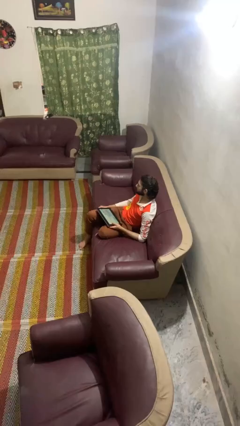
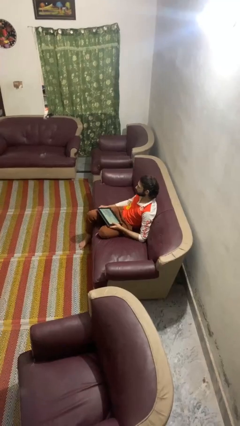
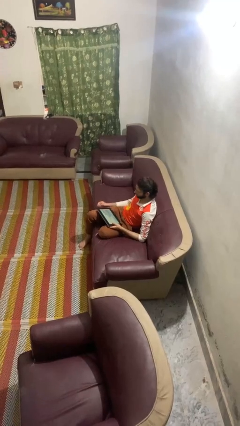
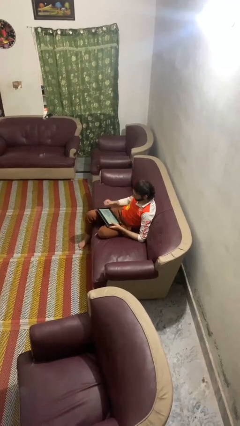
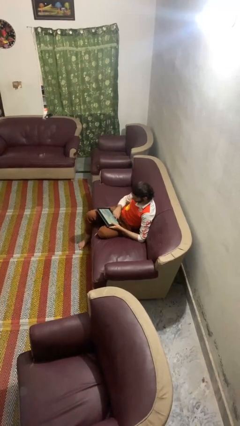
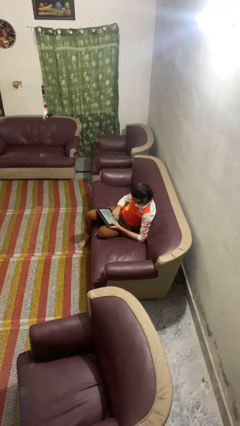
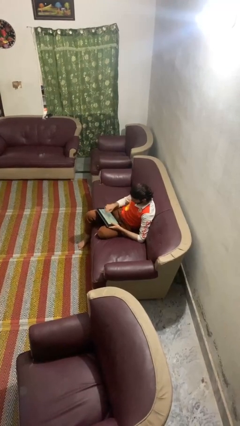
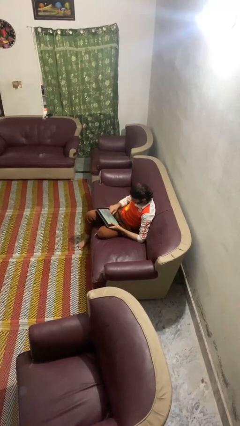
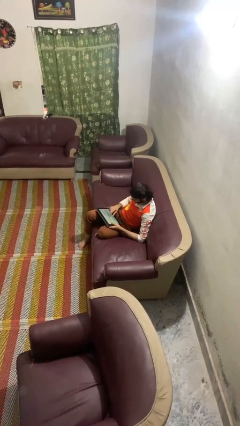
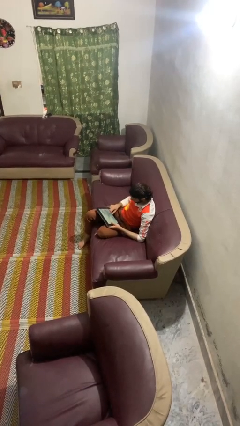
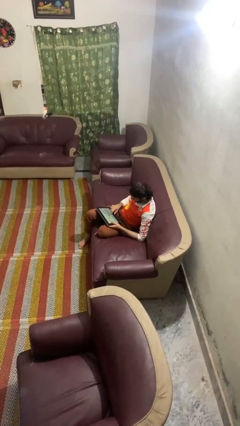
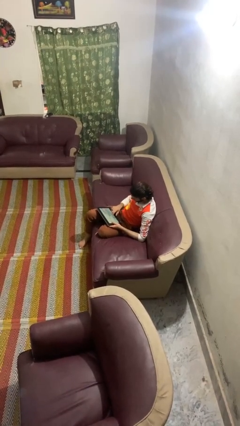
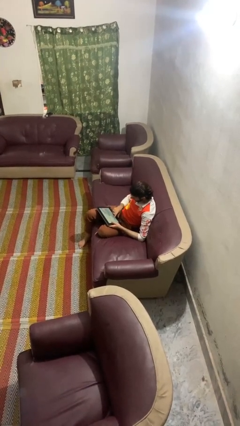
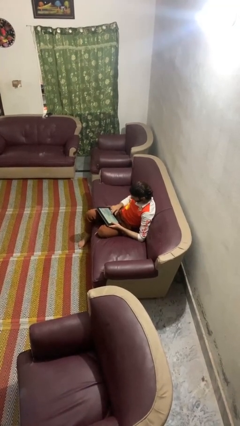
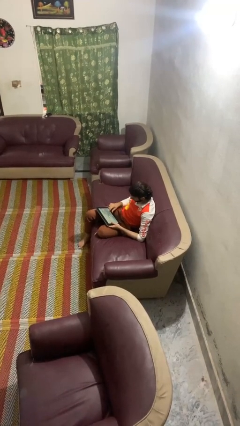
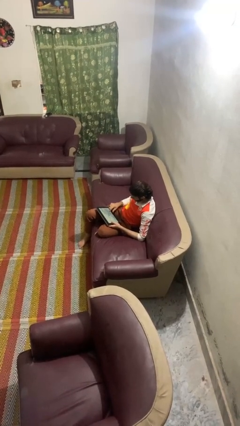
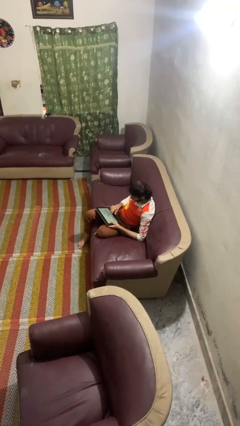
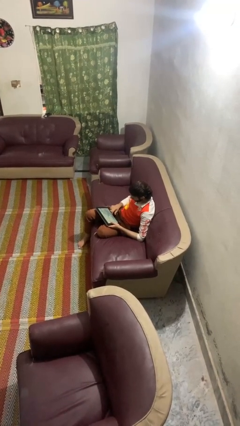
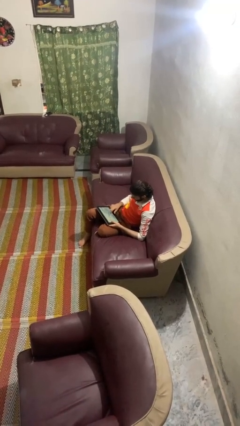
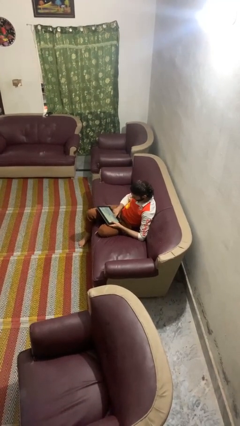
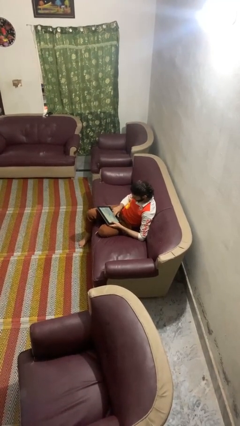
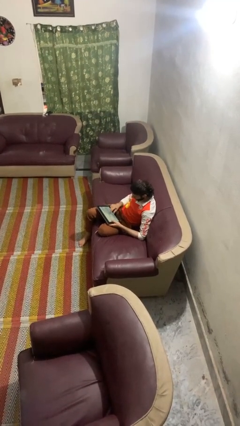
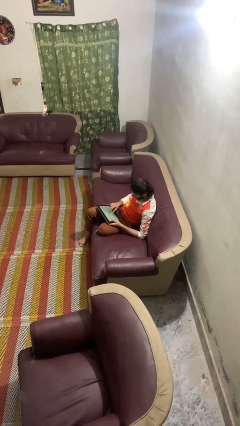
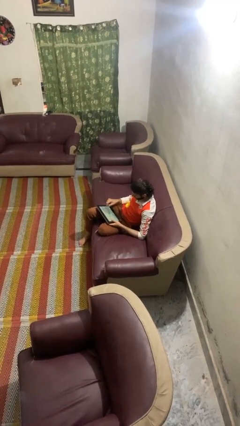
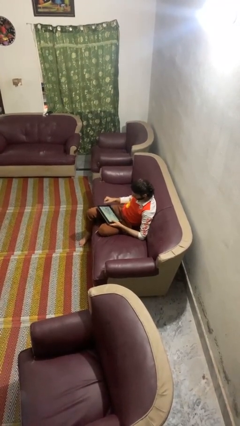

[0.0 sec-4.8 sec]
person interacts with tablet

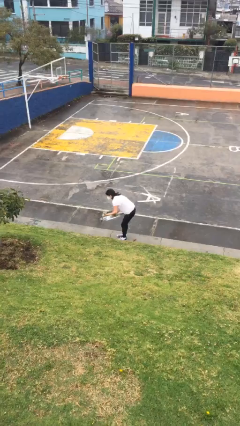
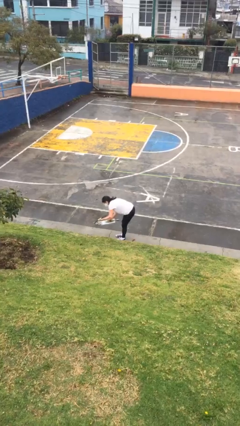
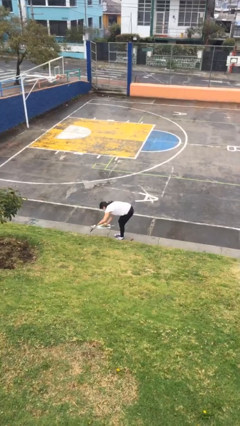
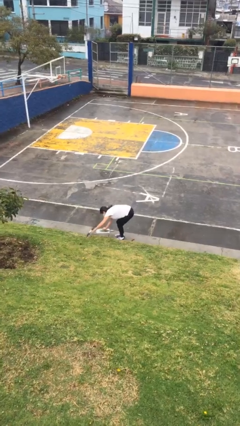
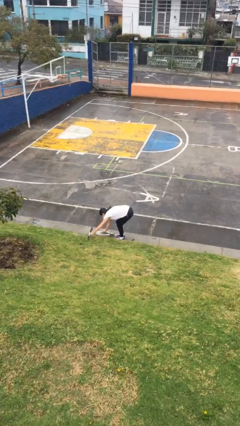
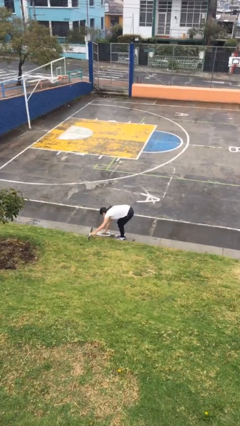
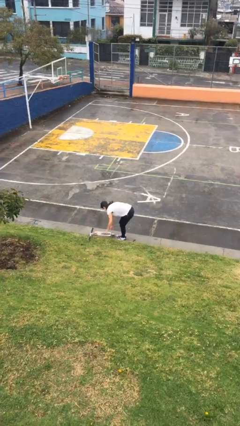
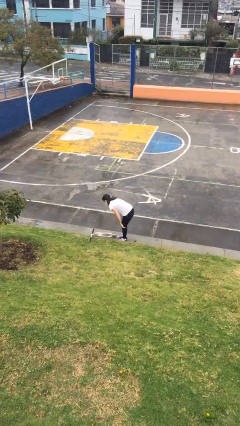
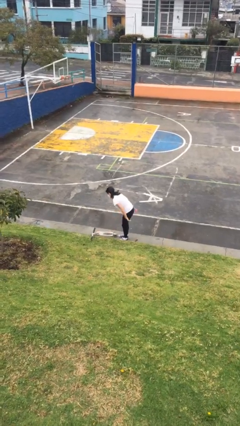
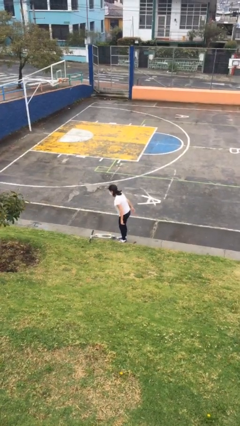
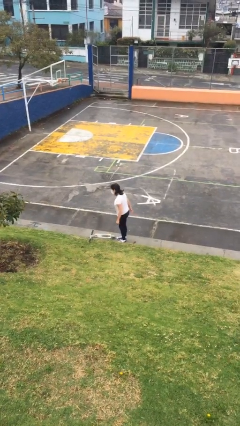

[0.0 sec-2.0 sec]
person puts down object on floor

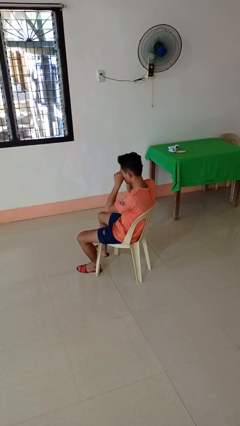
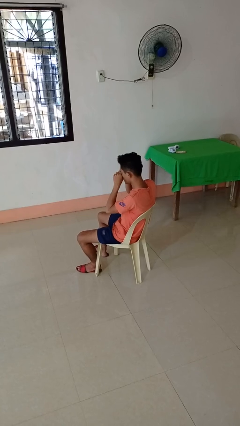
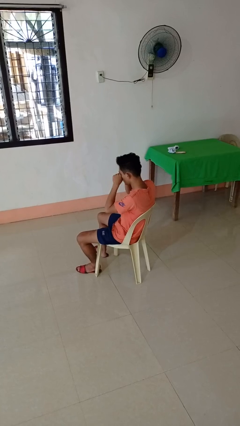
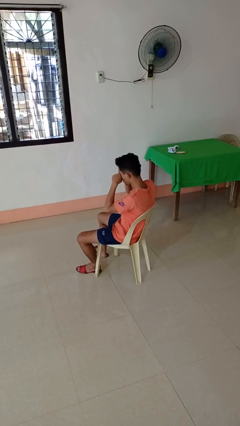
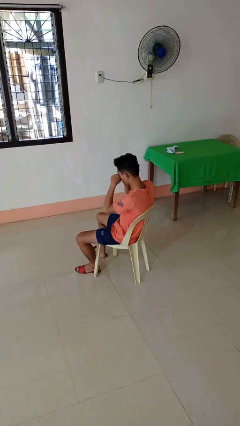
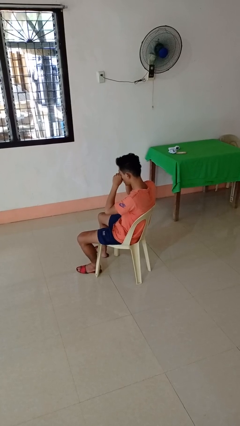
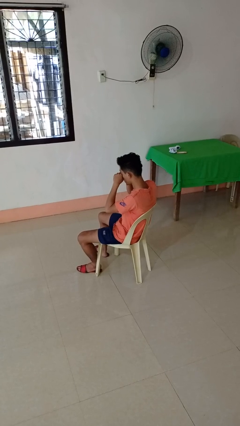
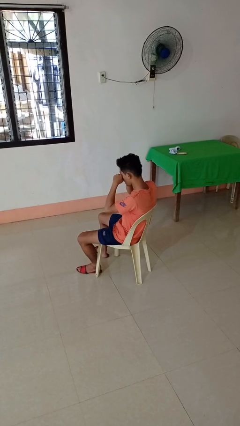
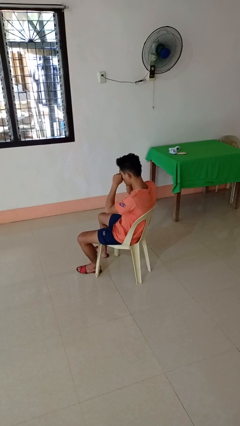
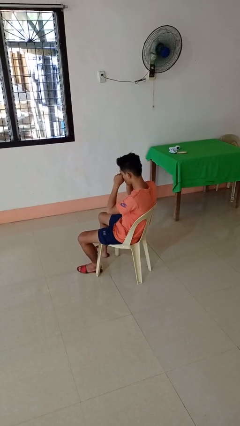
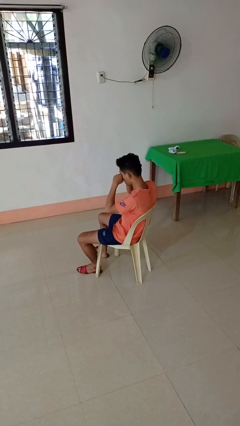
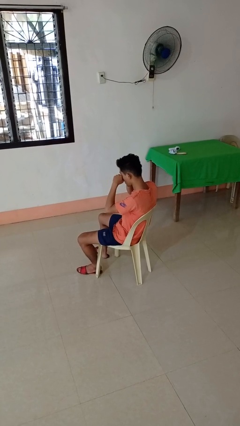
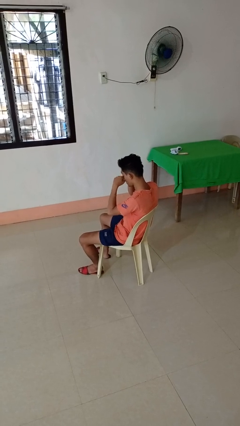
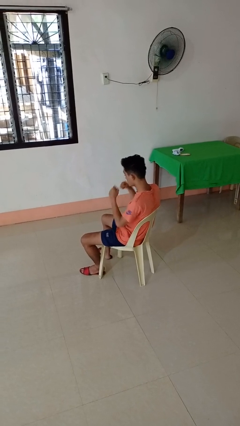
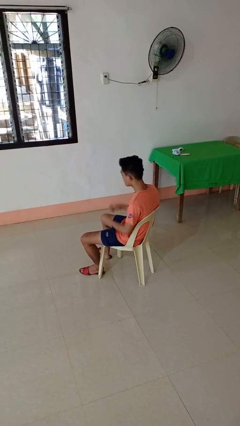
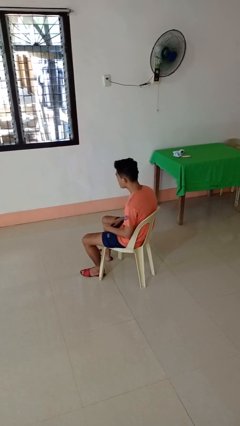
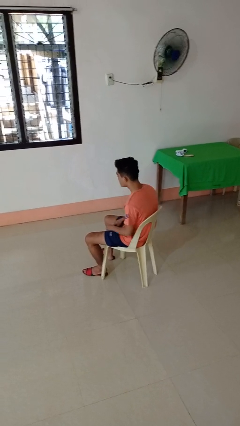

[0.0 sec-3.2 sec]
person rubs eyes

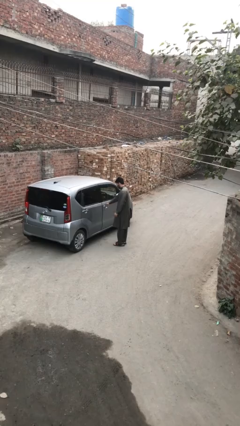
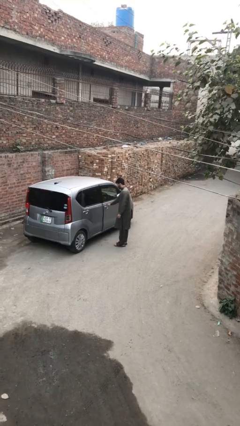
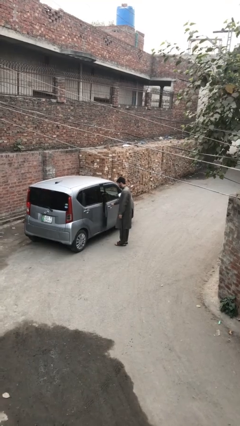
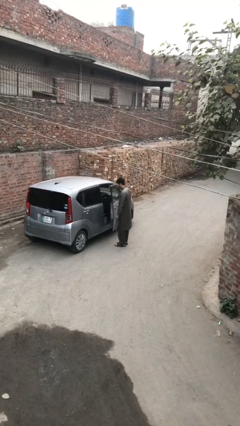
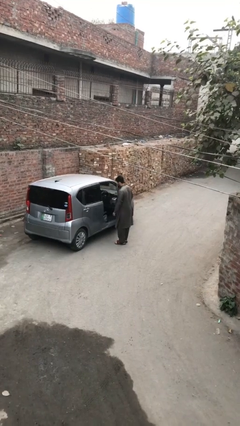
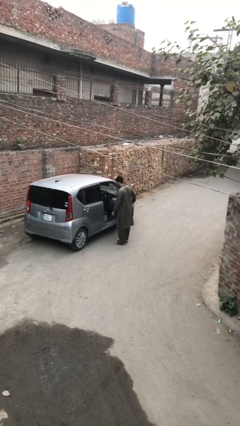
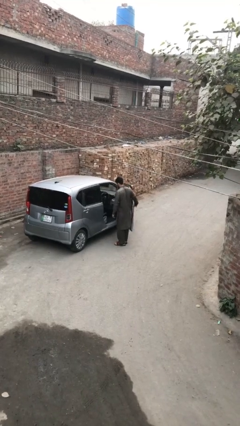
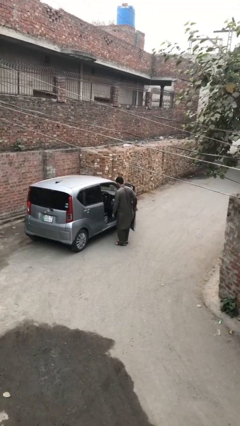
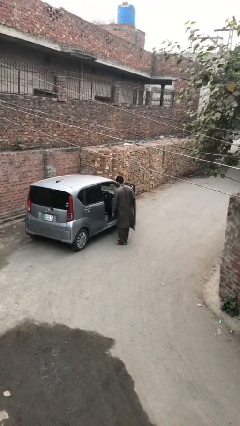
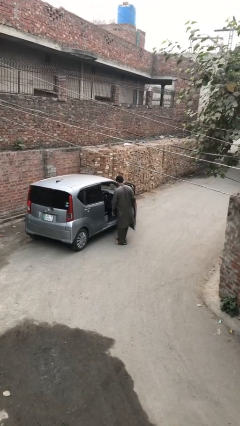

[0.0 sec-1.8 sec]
person opens car door

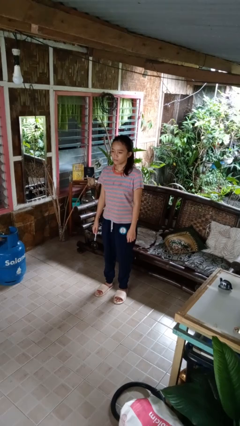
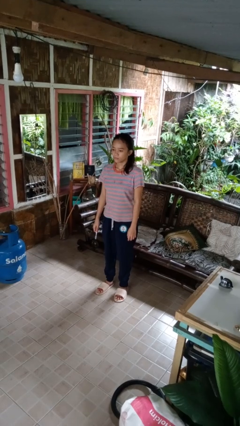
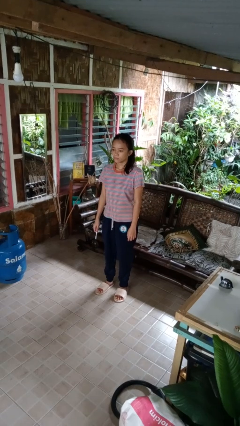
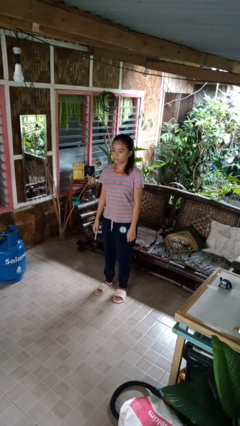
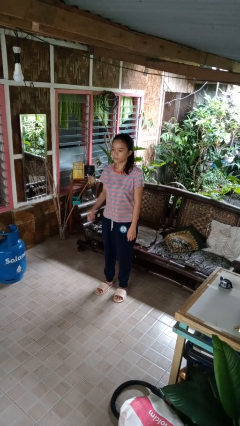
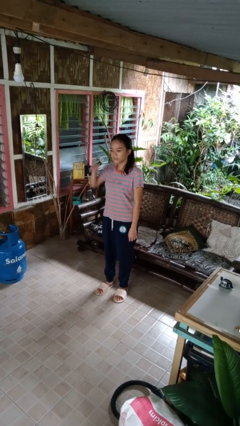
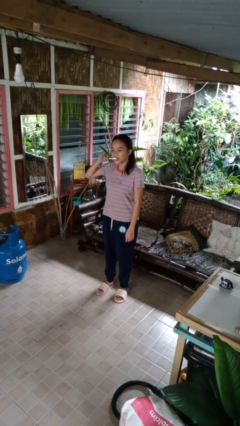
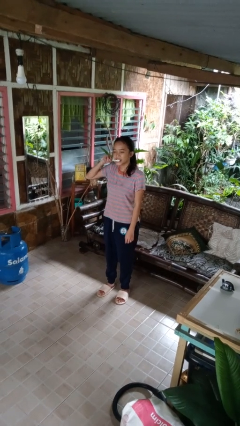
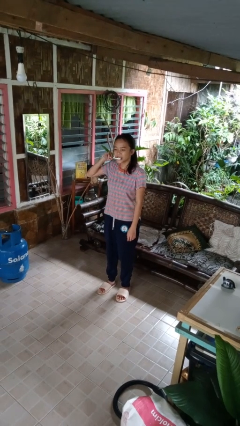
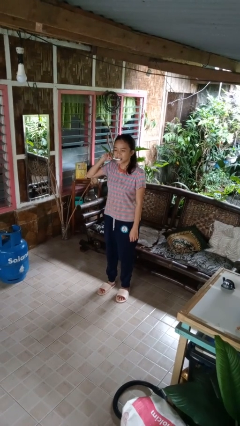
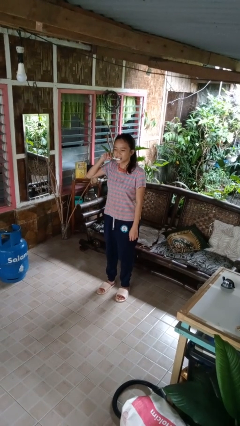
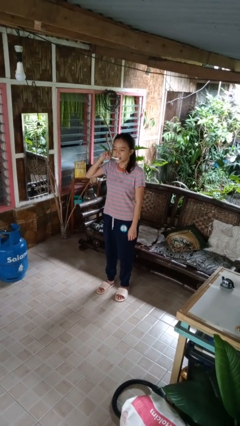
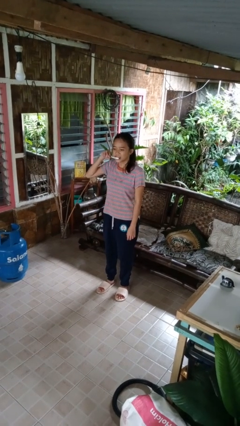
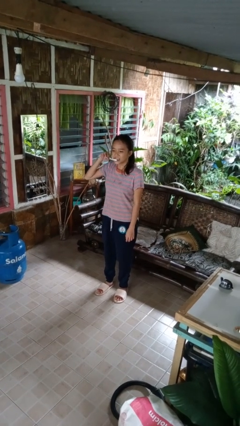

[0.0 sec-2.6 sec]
person brushes teeth

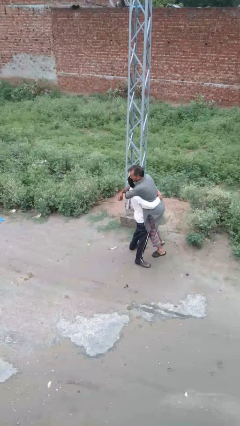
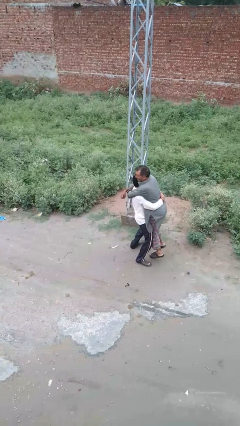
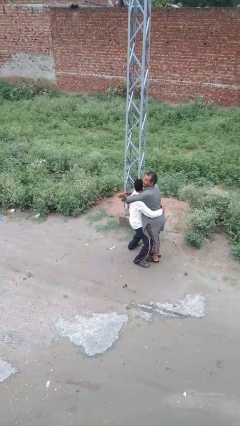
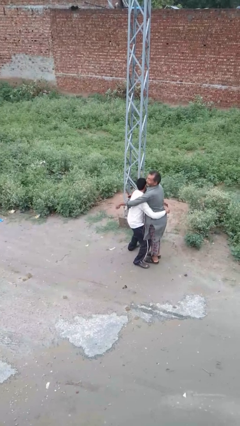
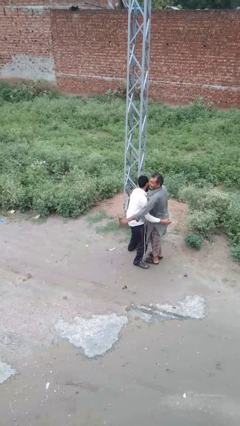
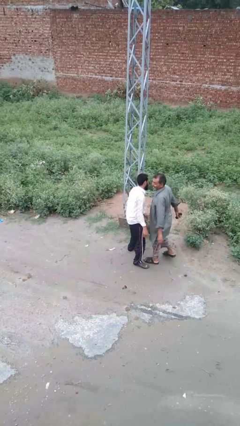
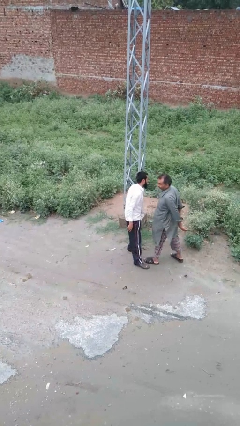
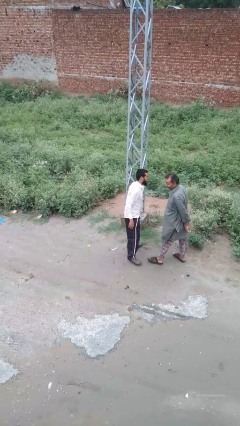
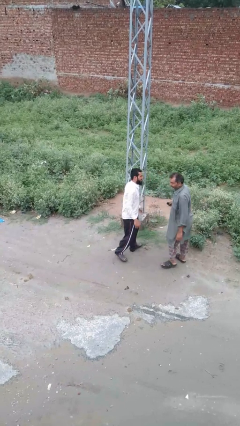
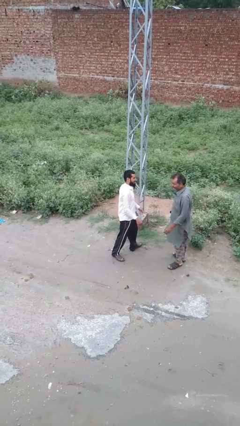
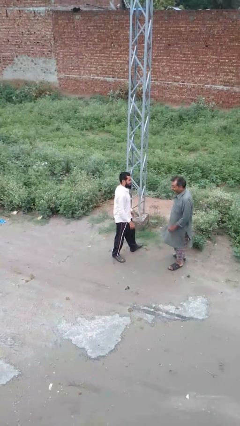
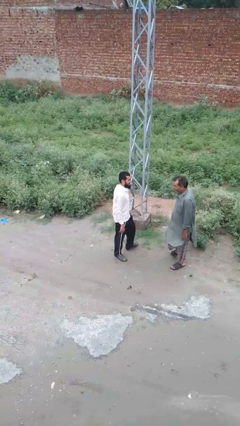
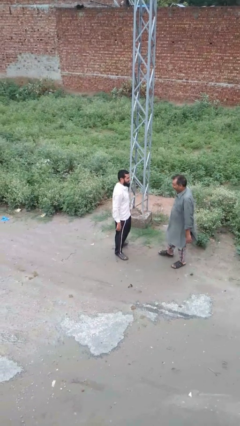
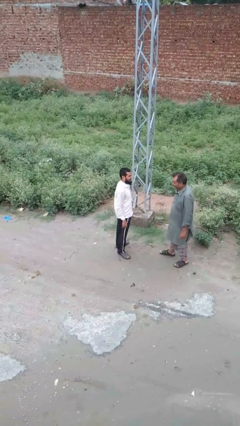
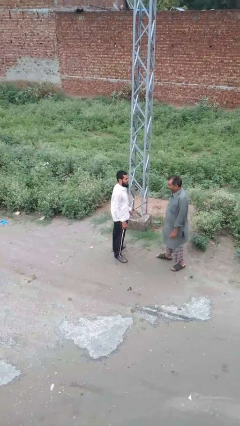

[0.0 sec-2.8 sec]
person puts down person
